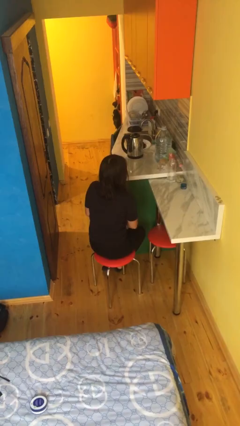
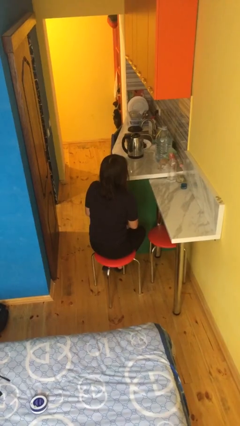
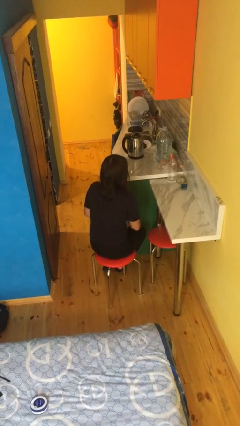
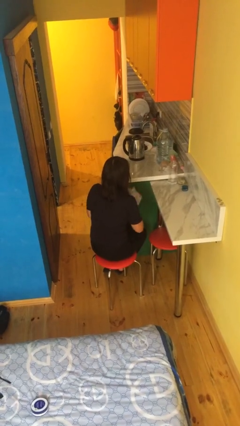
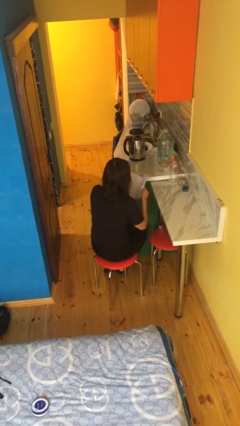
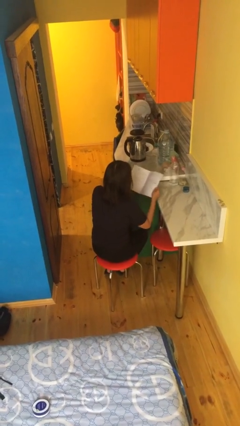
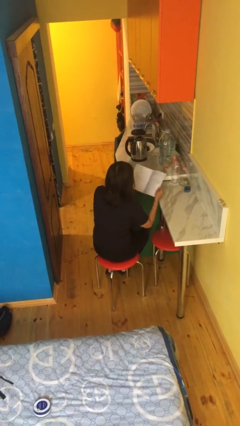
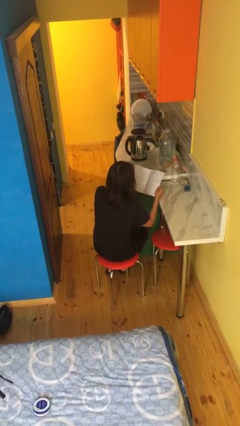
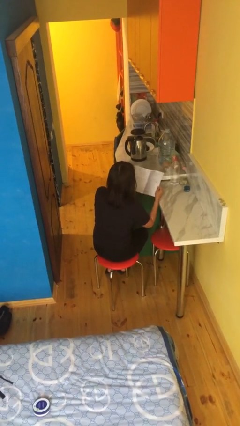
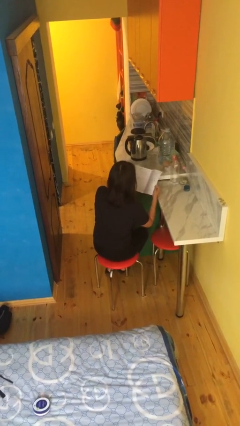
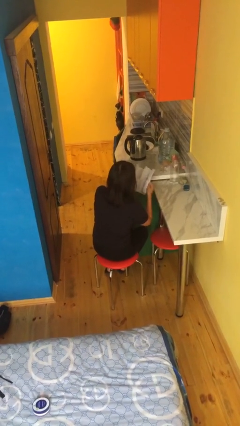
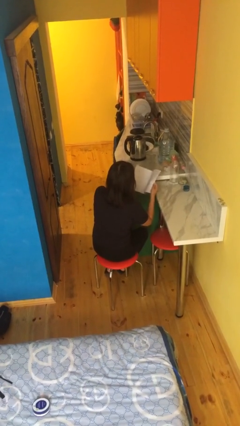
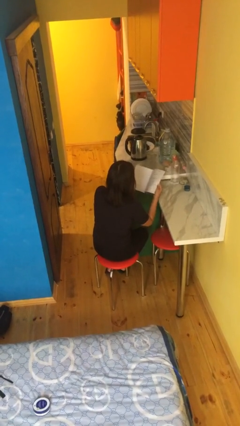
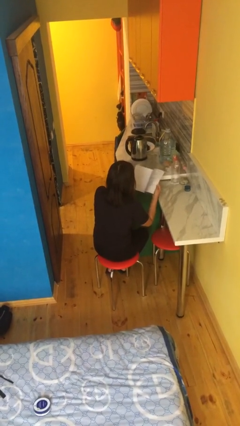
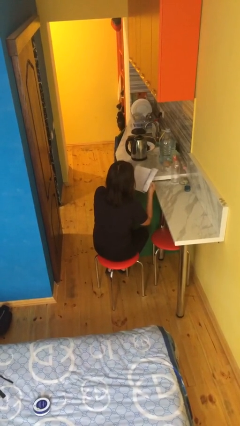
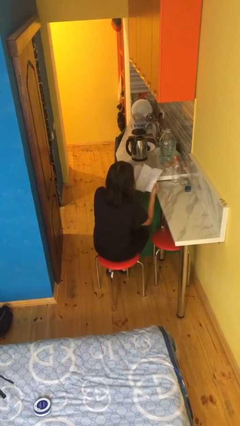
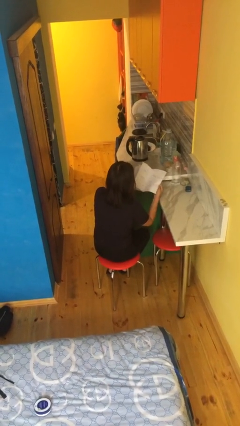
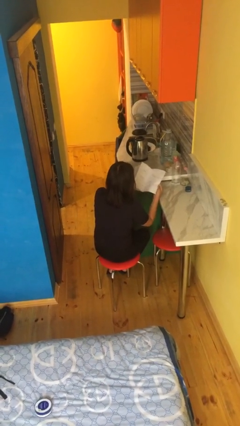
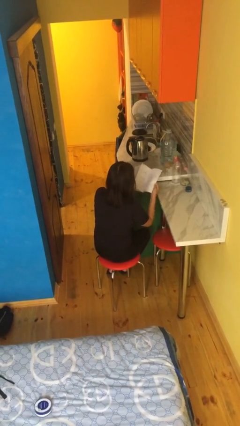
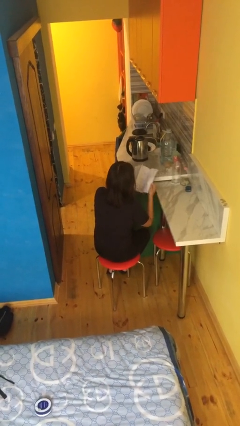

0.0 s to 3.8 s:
person reads book

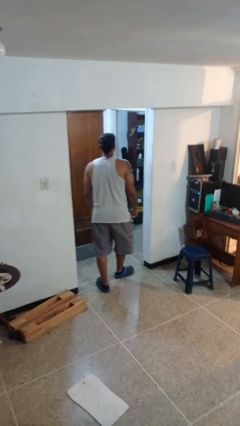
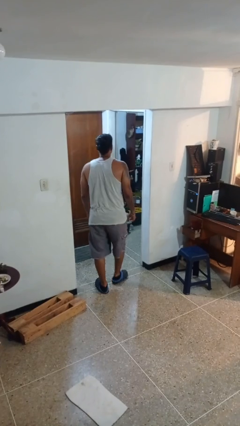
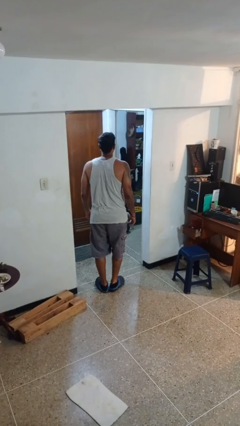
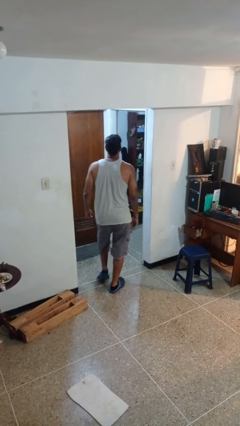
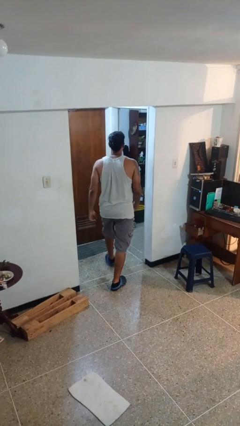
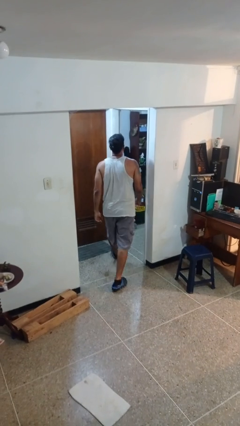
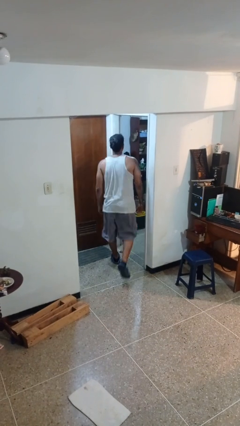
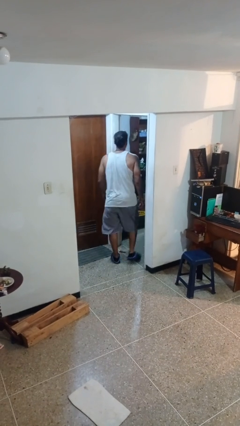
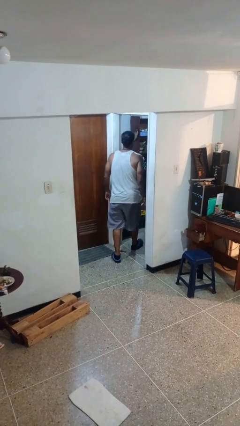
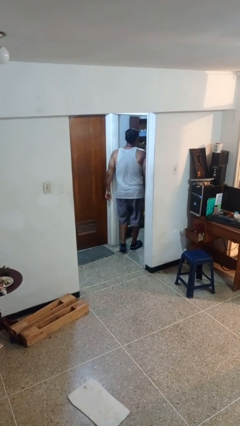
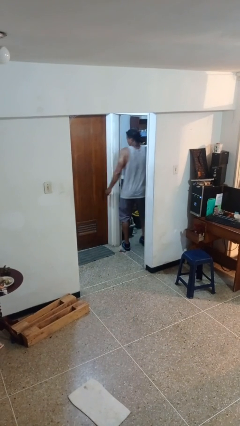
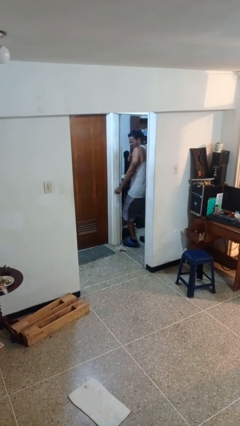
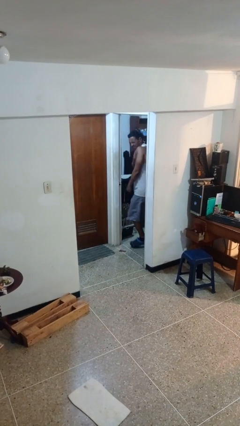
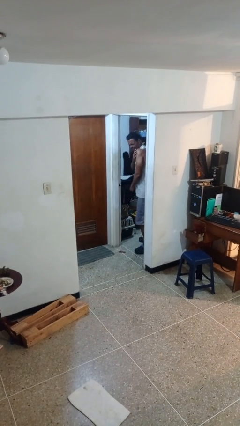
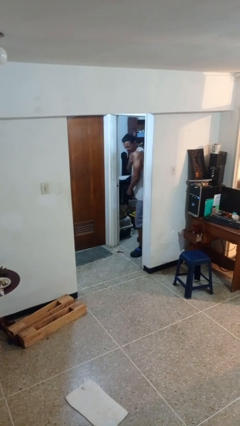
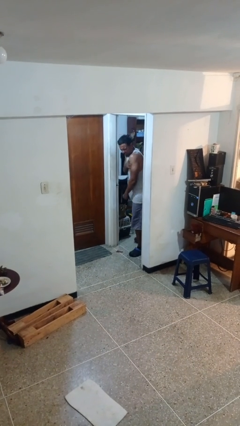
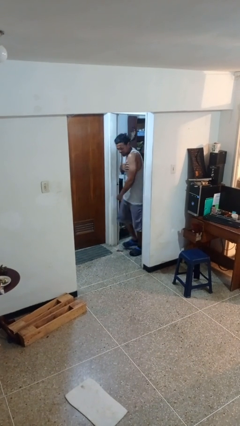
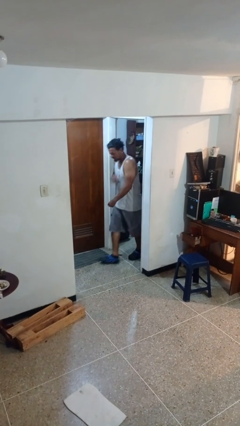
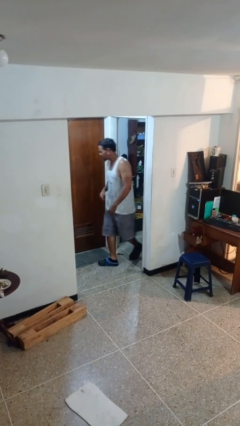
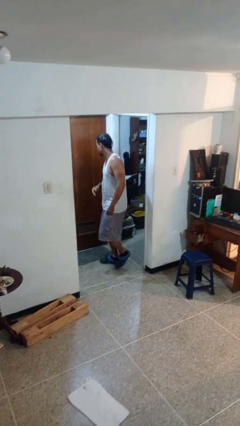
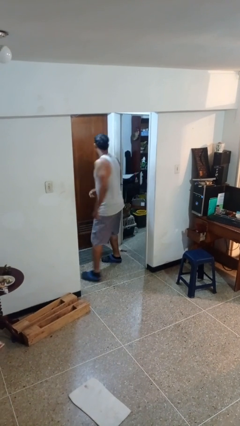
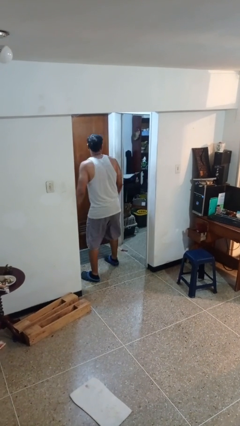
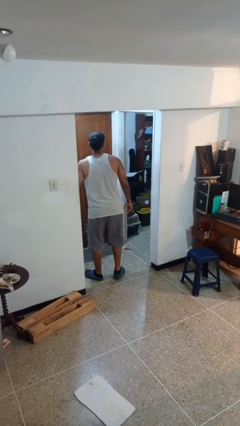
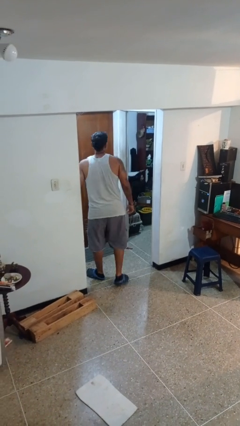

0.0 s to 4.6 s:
person bumps into wall

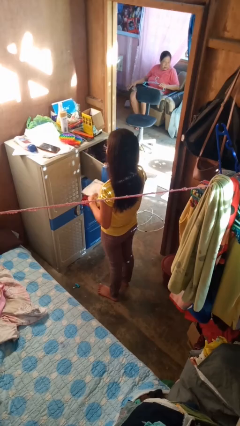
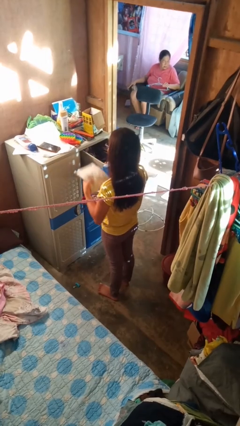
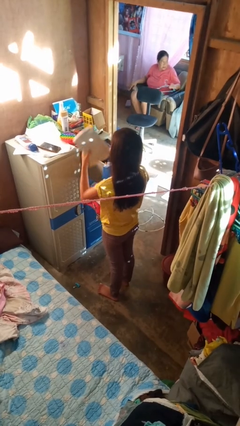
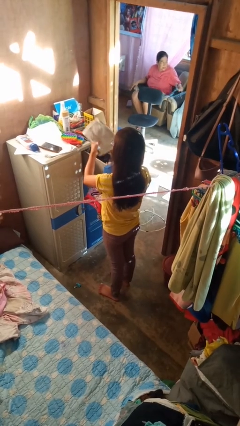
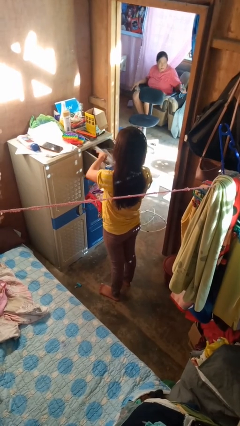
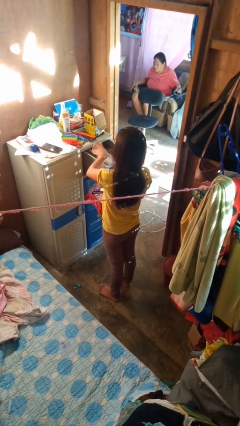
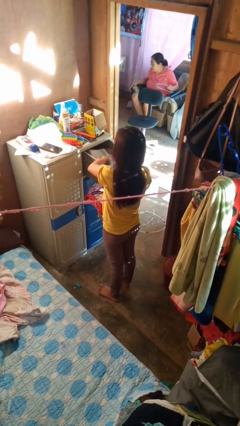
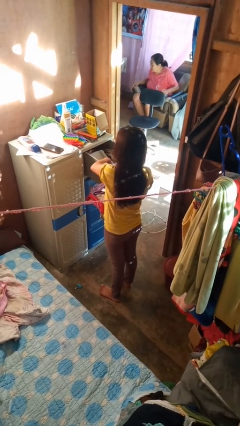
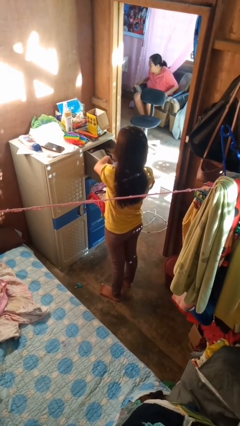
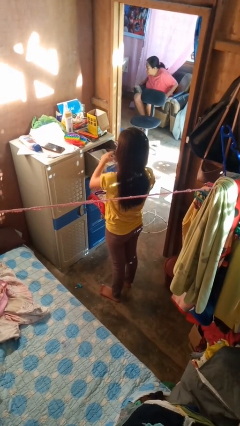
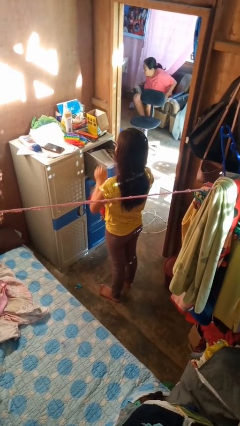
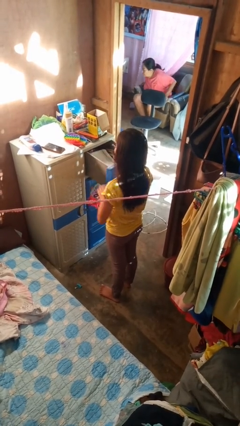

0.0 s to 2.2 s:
person puts clothes into dresser

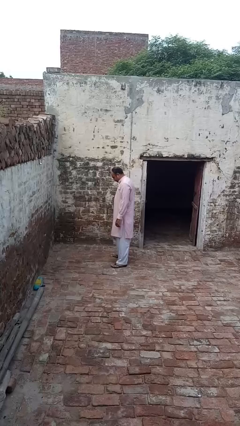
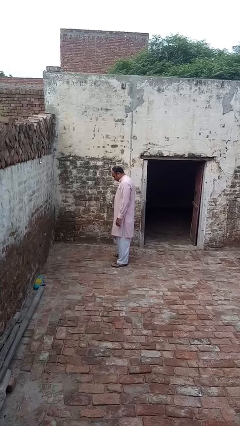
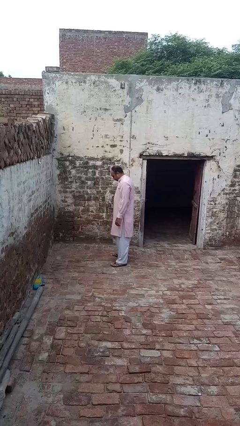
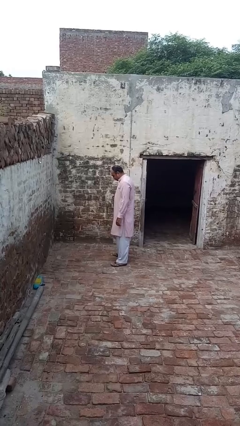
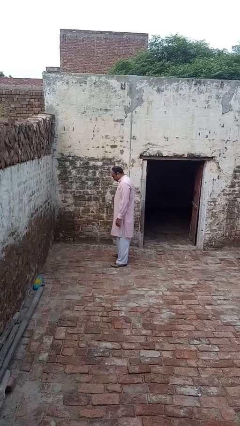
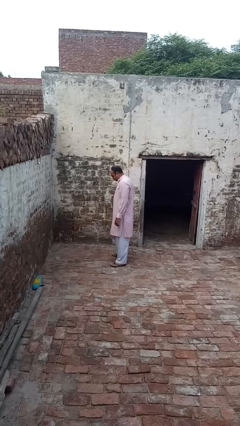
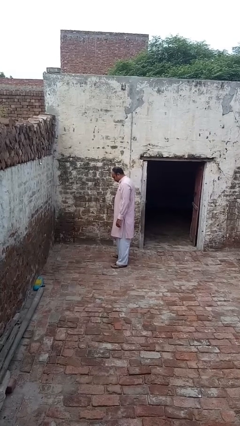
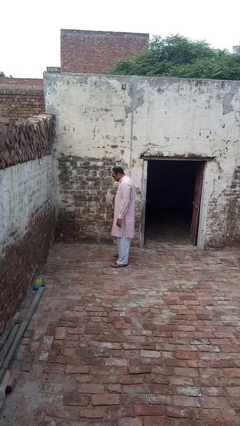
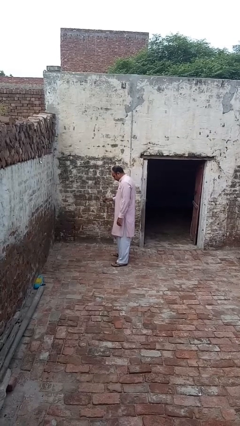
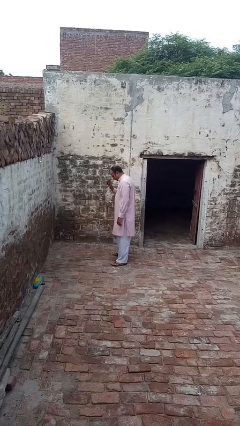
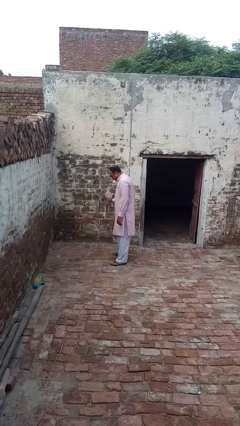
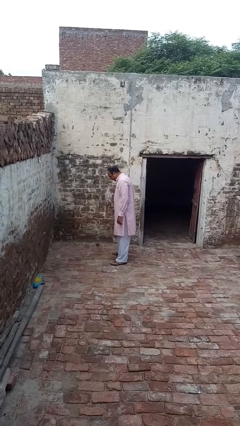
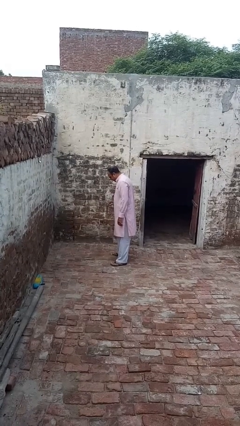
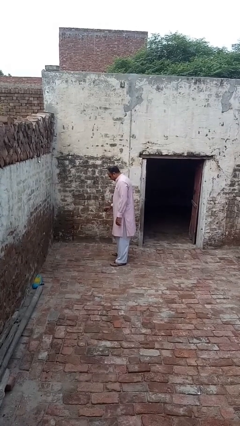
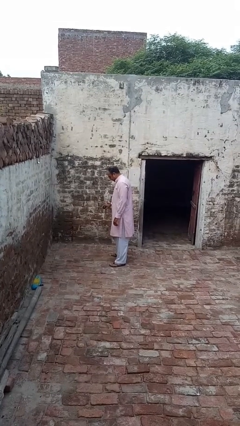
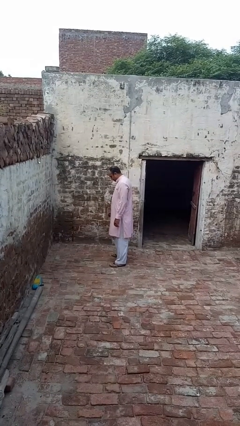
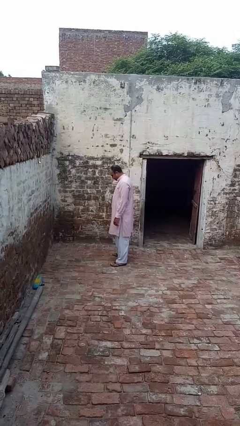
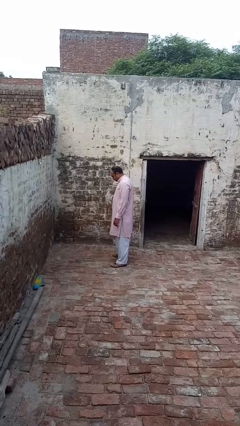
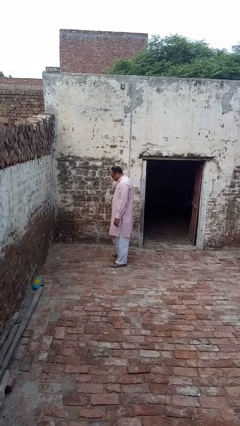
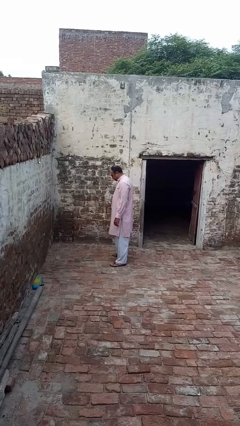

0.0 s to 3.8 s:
person bounces ball on floor

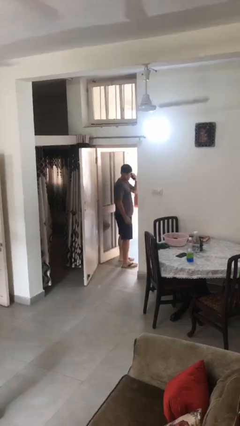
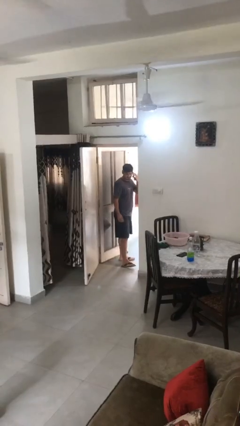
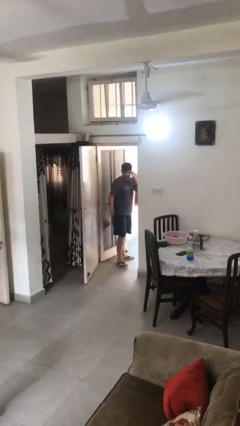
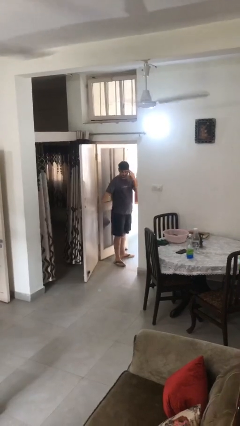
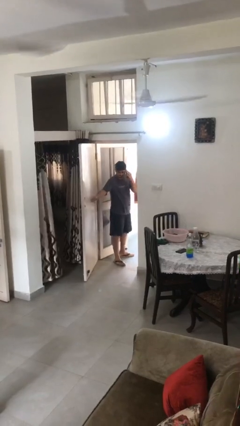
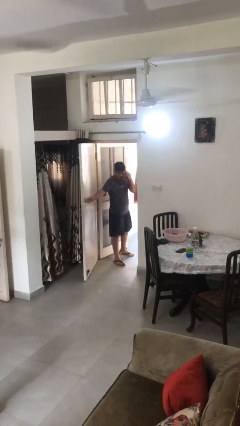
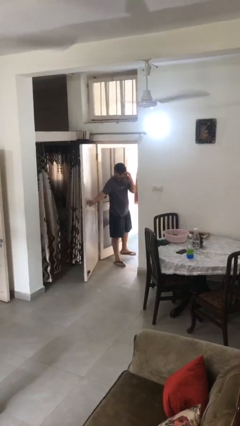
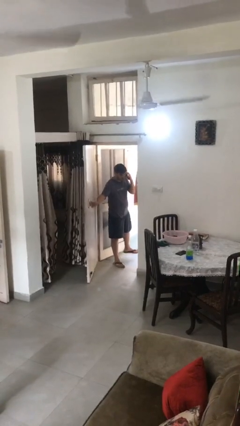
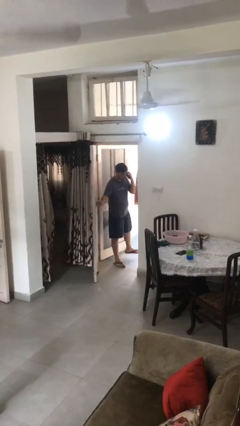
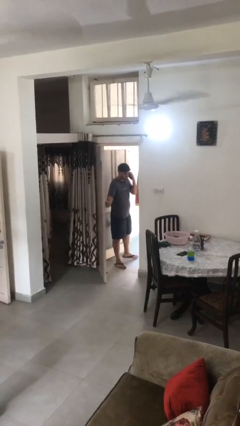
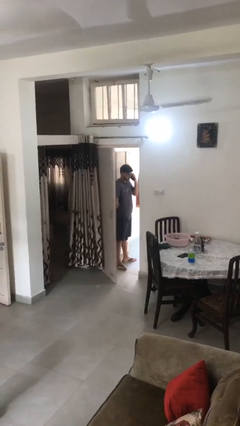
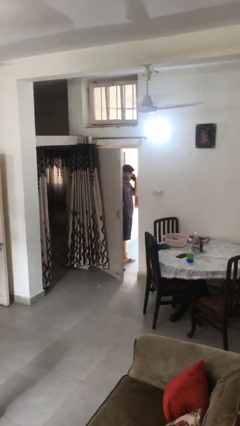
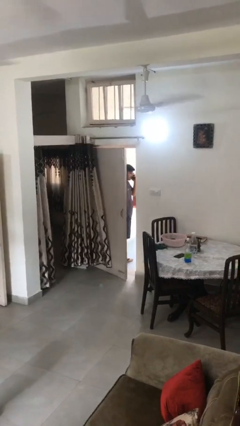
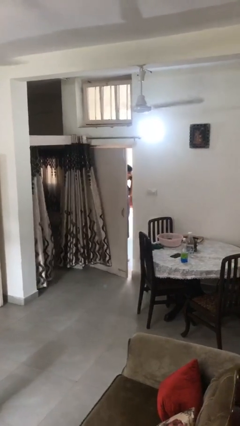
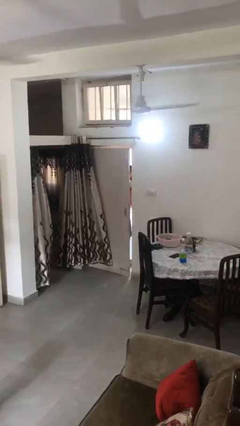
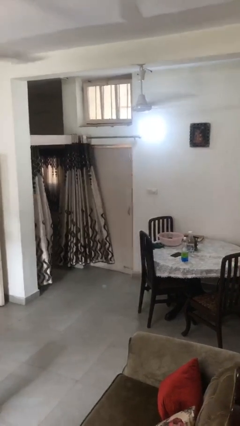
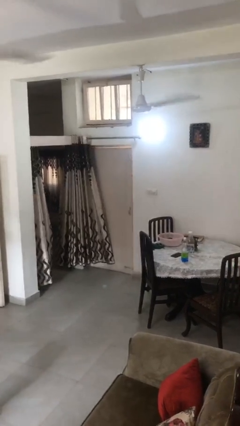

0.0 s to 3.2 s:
person closes facility door
